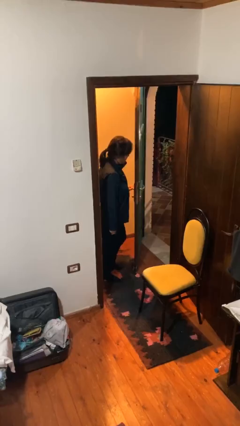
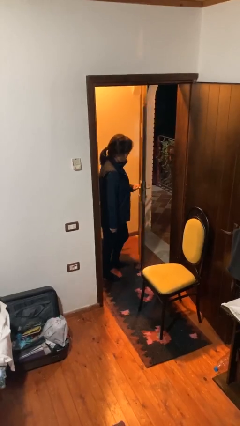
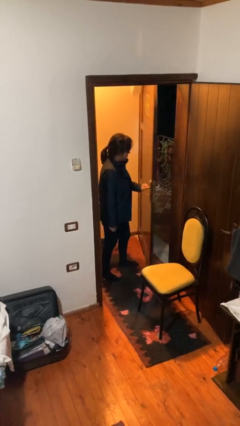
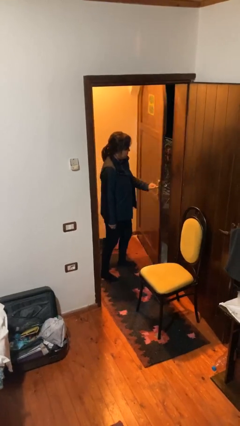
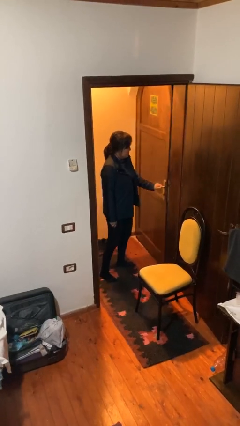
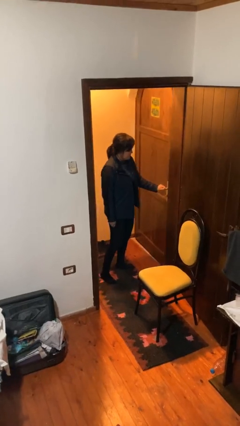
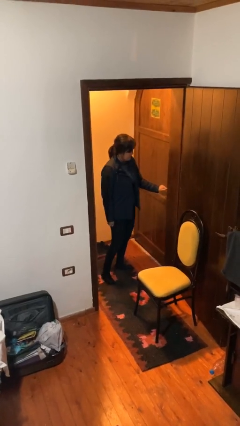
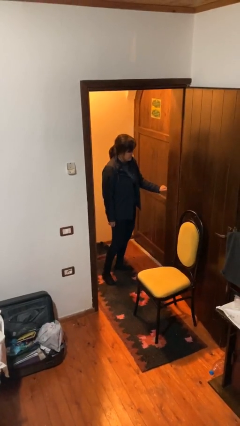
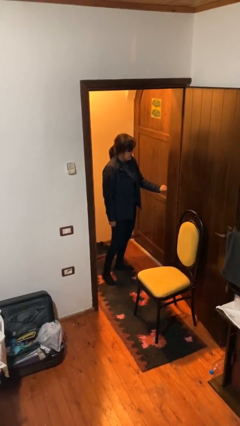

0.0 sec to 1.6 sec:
person closes facility door

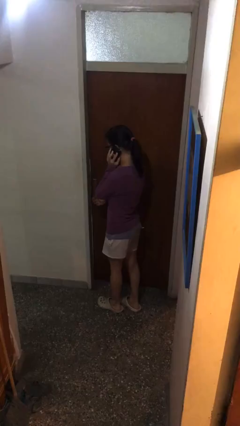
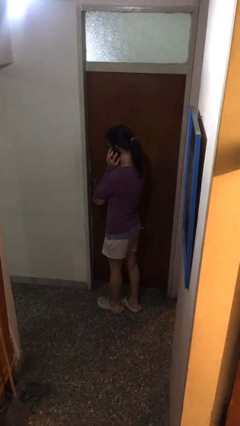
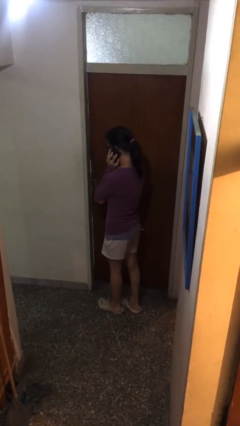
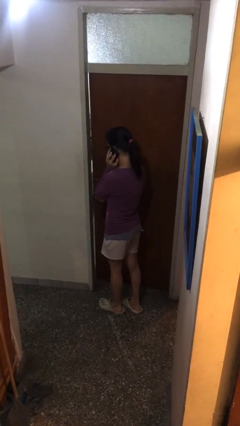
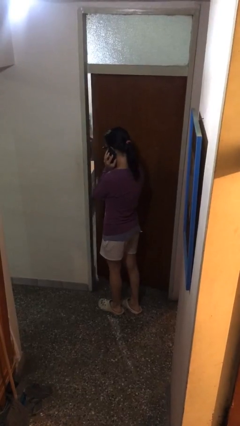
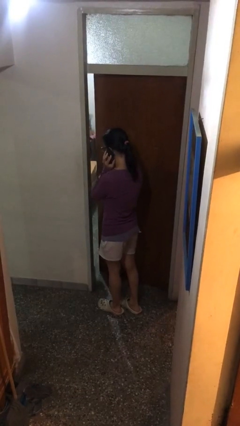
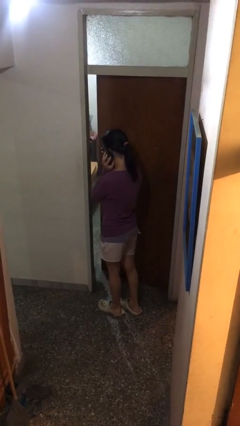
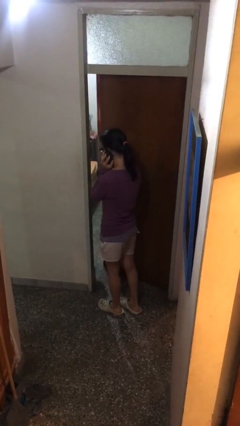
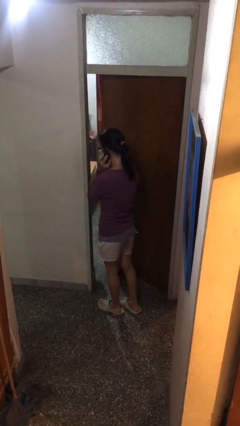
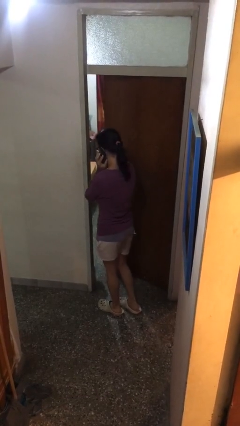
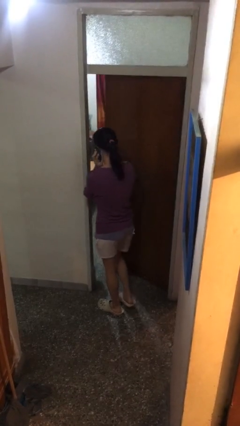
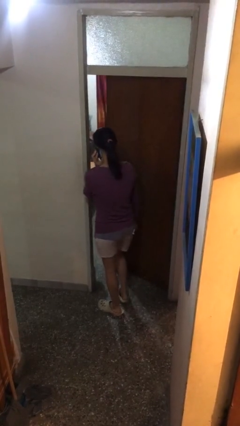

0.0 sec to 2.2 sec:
person opens facility door

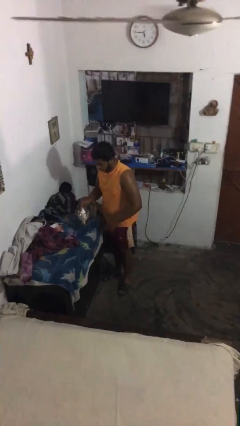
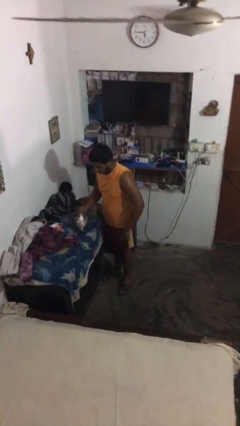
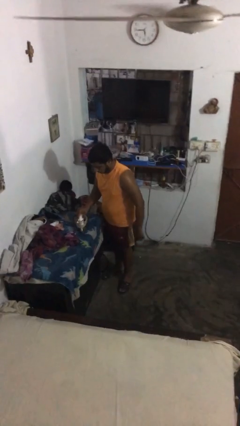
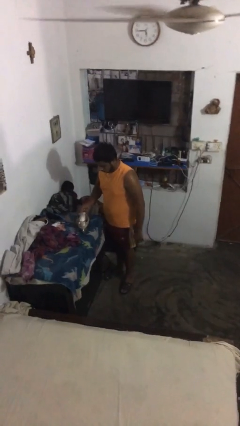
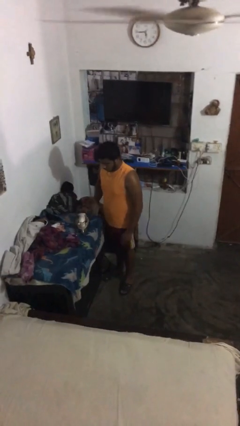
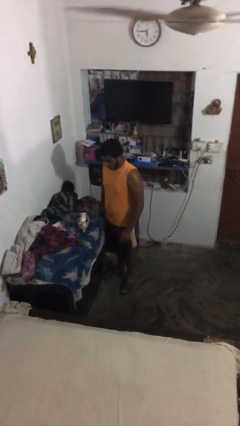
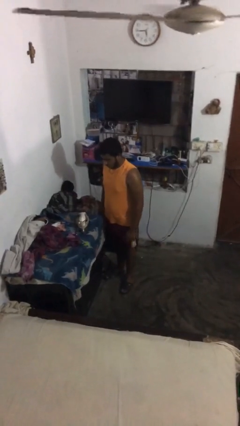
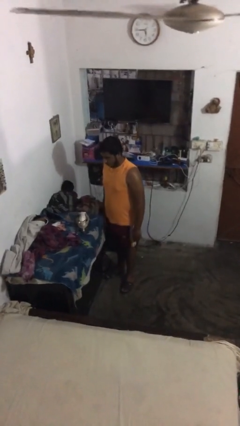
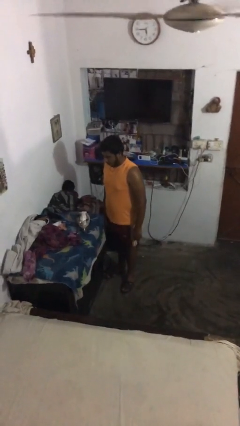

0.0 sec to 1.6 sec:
person puts down object on table

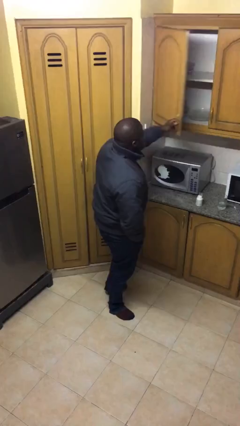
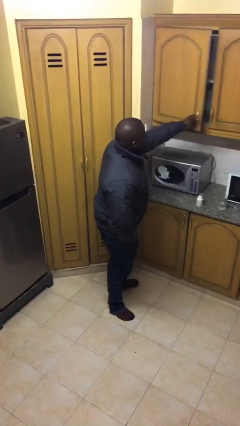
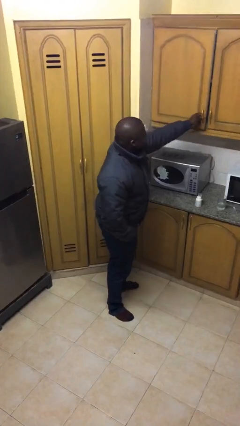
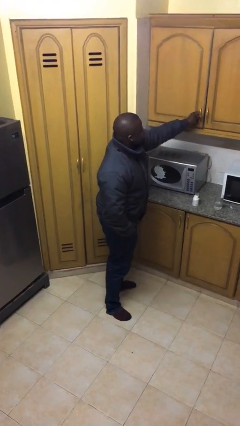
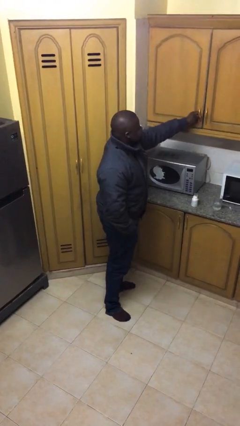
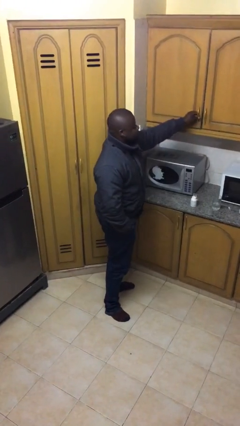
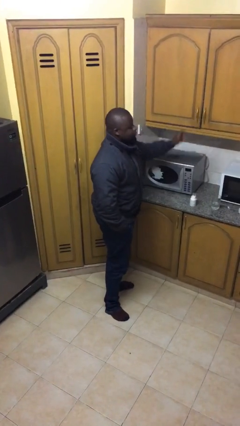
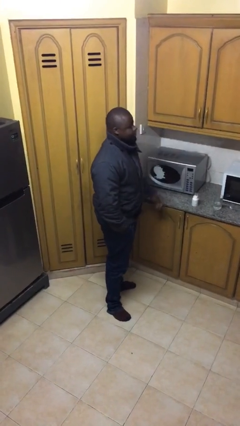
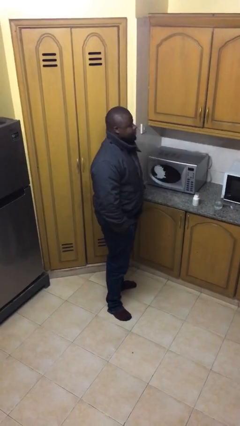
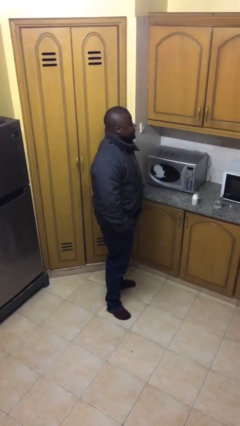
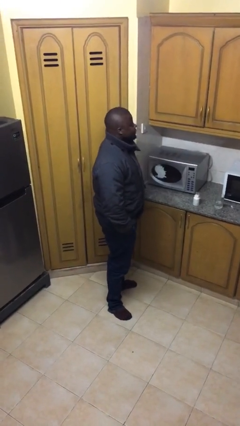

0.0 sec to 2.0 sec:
person closes cabinet

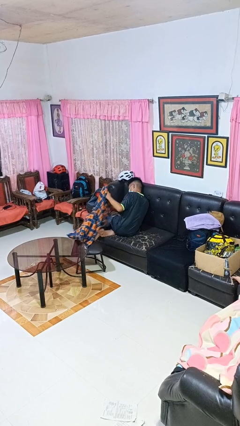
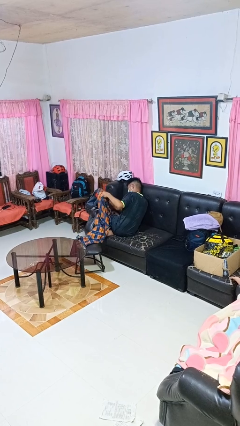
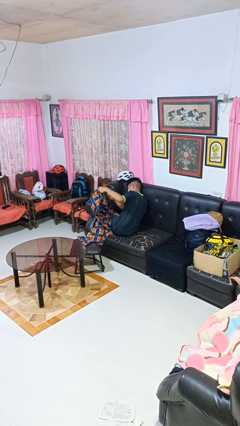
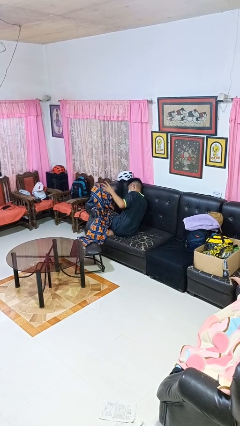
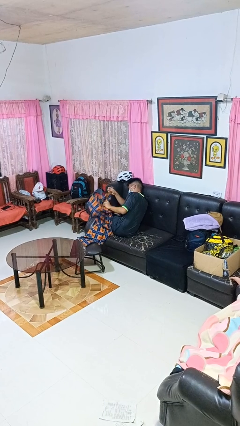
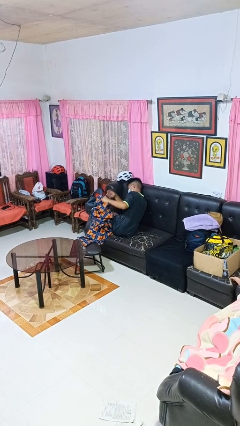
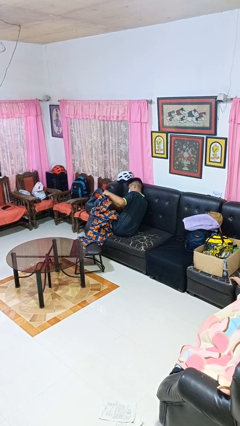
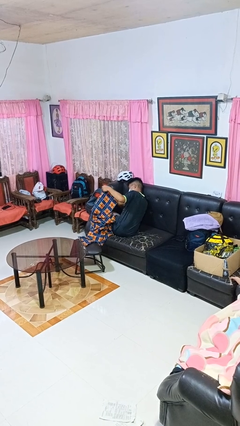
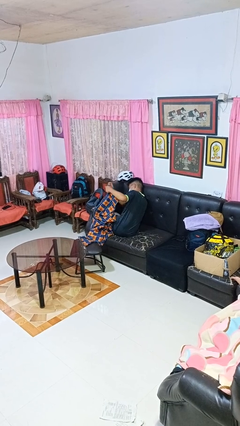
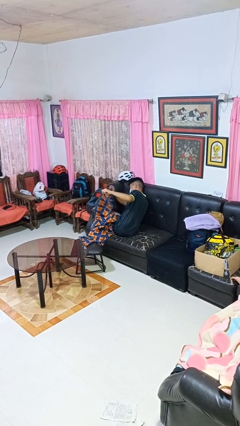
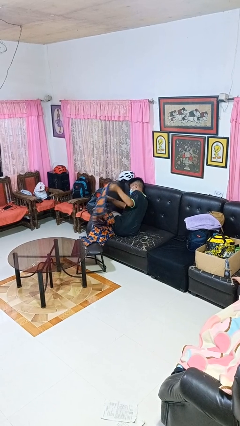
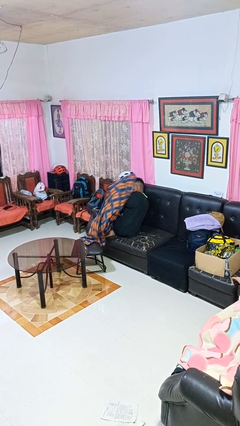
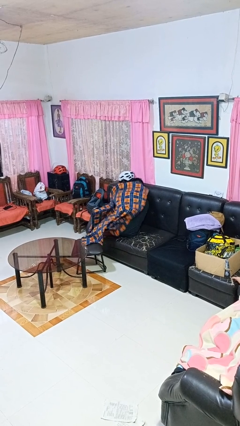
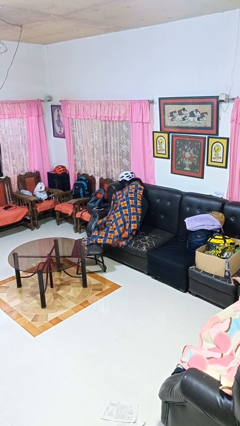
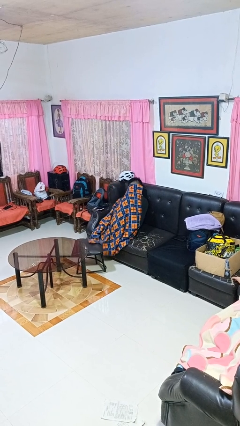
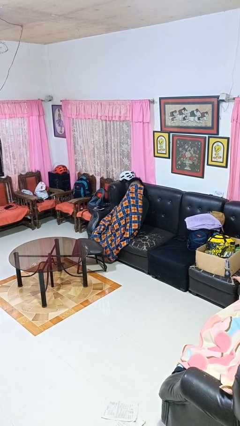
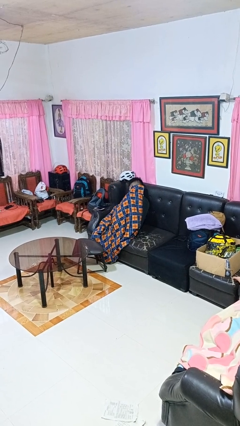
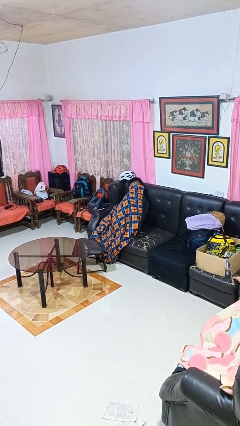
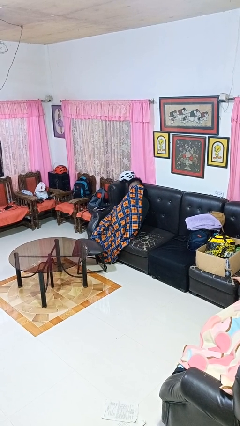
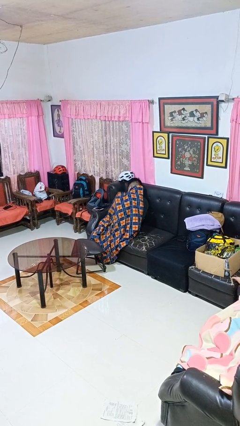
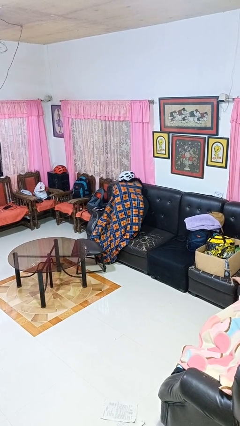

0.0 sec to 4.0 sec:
person covers with blanket

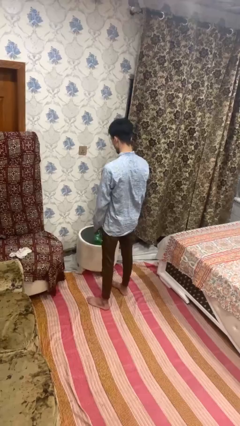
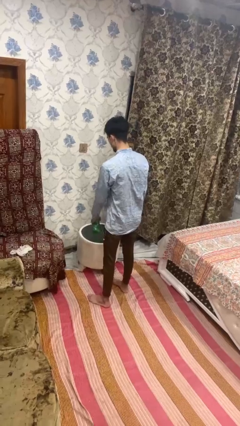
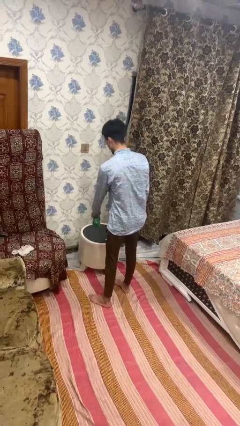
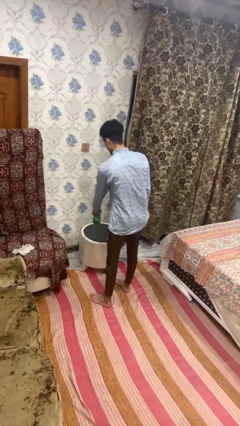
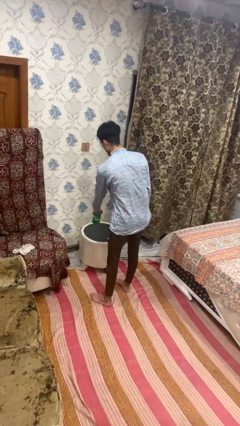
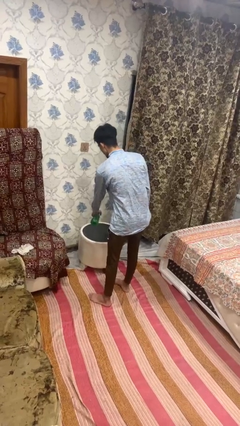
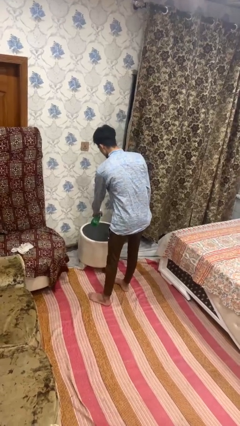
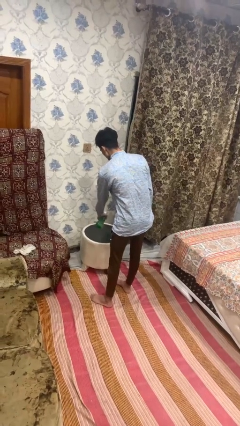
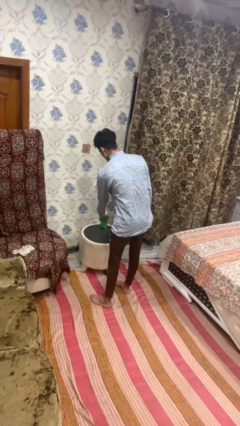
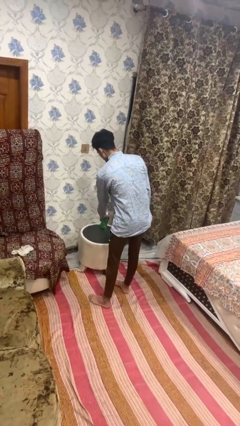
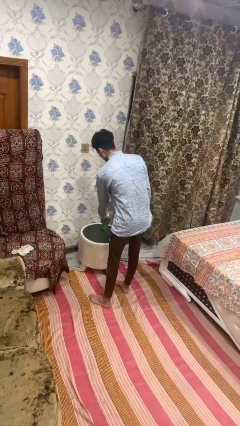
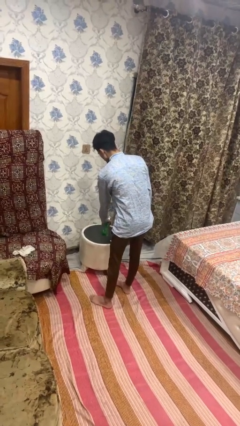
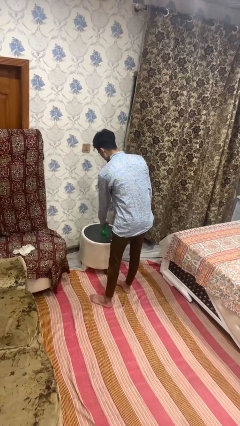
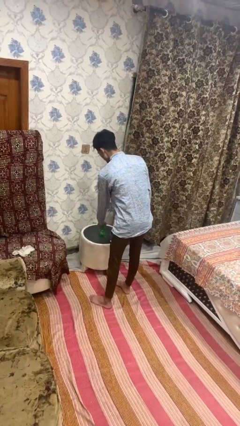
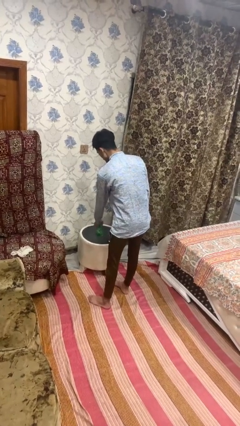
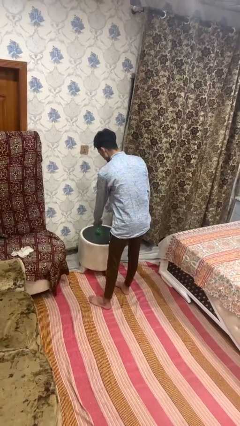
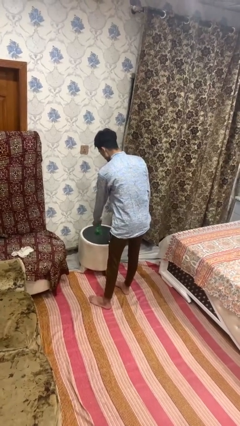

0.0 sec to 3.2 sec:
person sprays from bottle

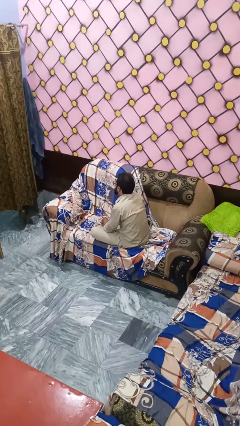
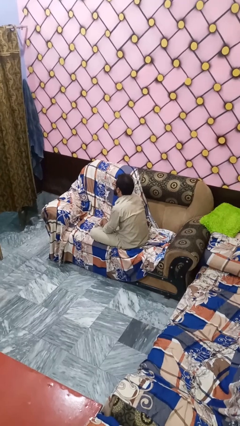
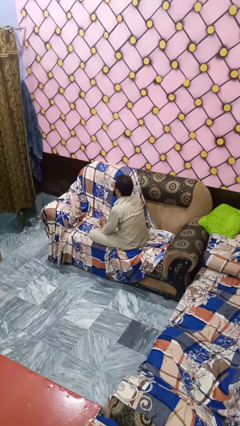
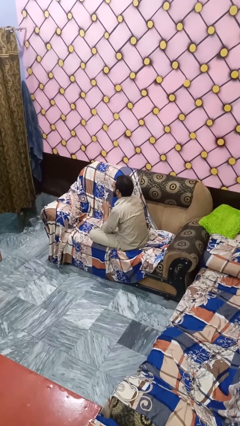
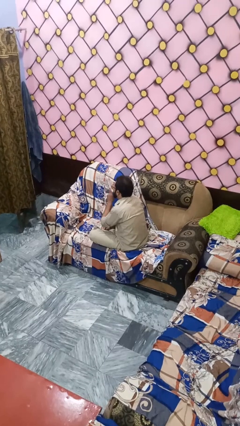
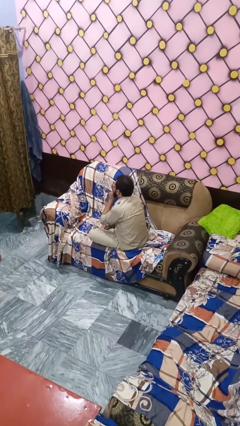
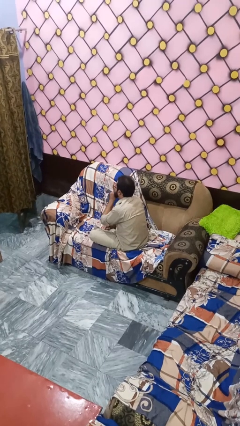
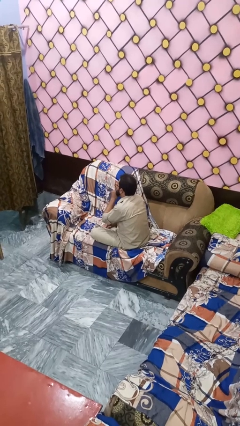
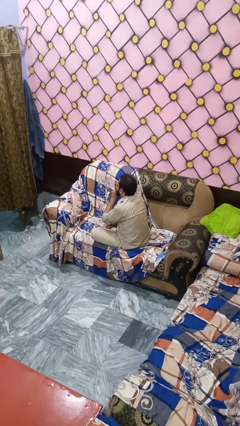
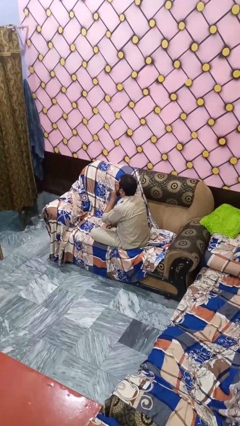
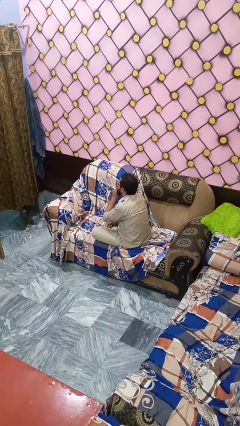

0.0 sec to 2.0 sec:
person gestures be quiet

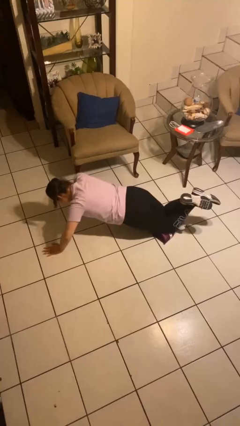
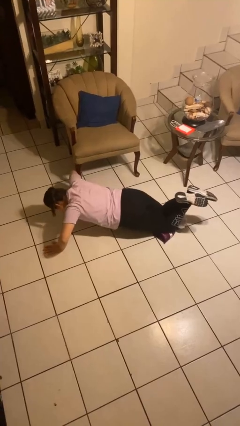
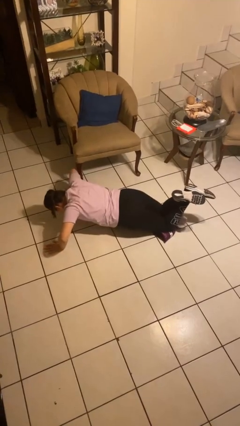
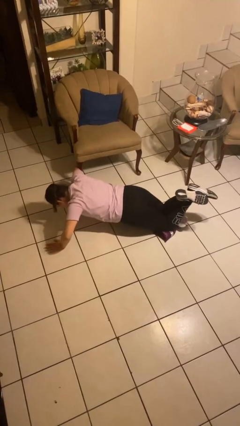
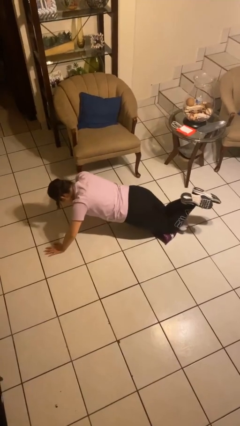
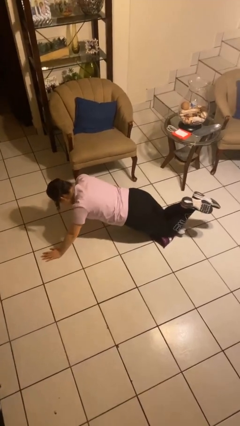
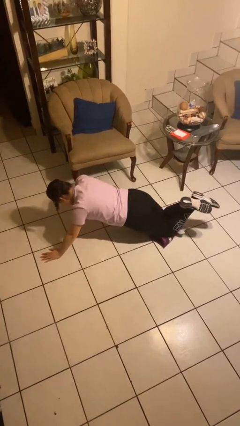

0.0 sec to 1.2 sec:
person exercises with pushup
